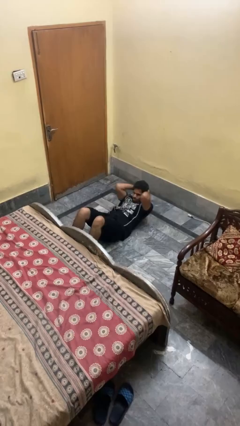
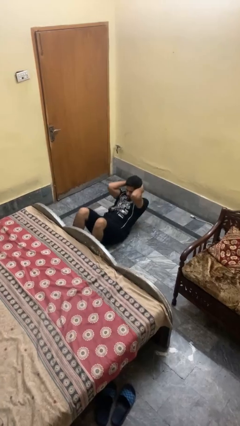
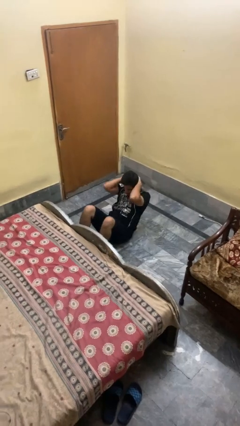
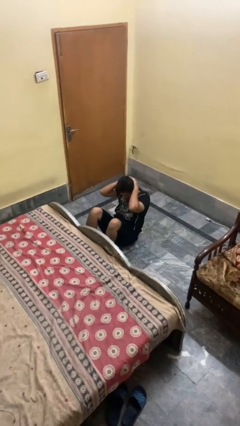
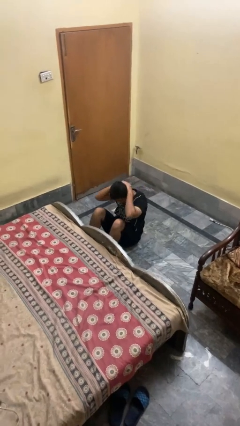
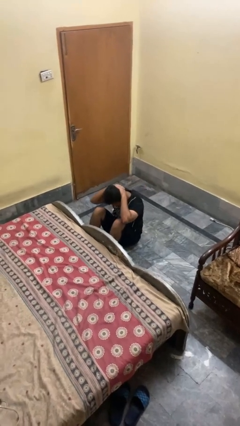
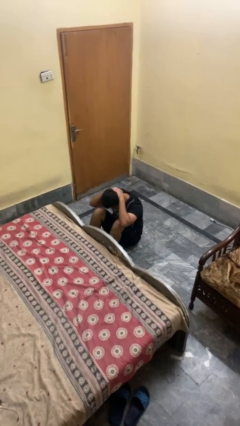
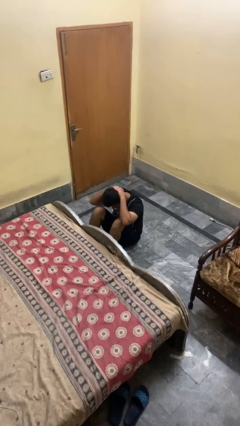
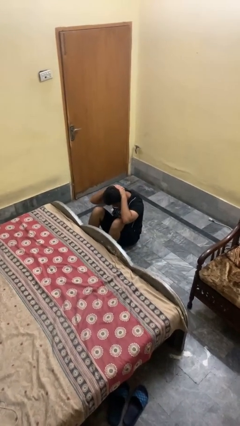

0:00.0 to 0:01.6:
person exercises with situp

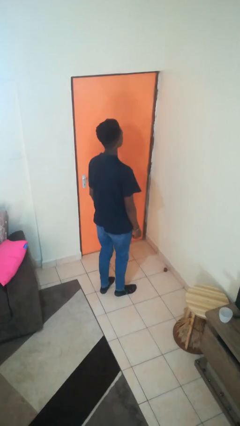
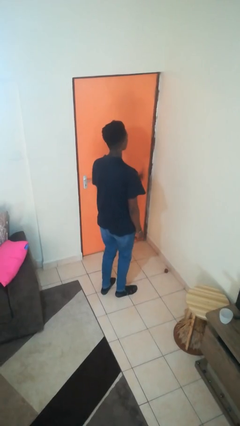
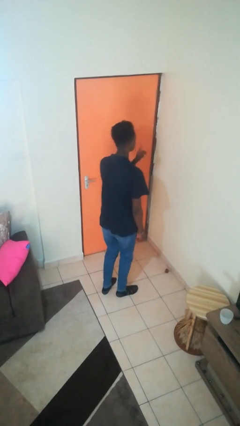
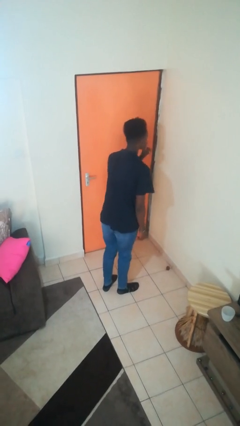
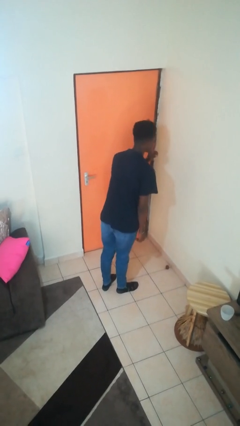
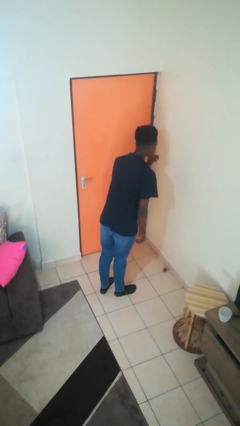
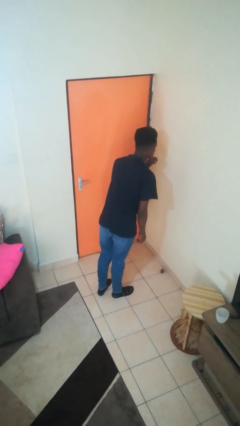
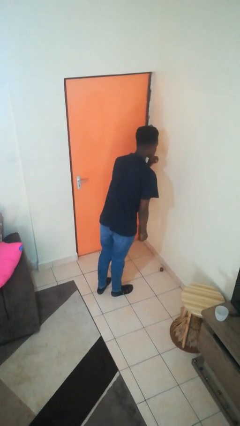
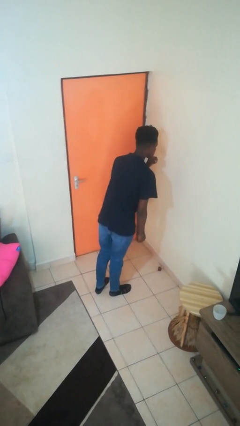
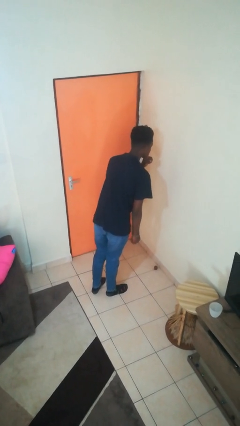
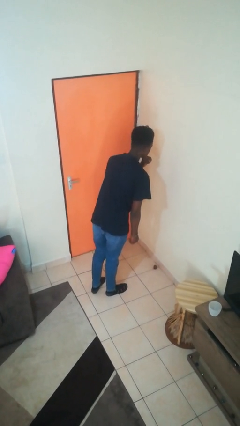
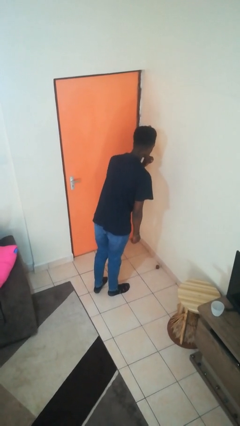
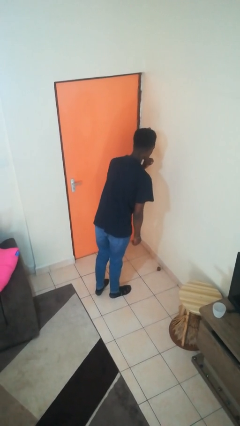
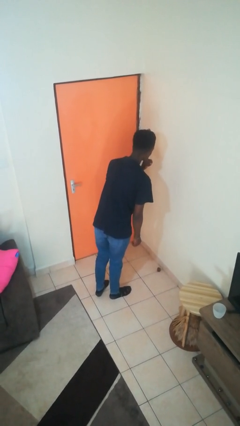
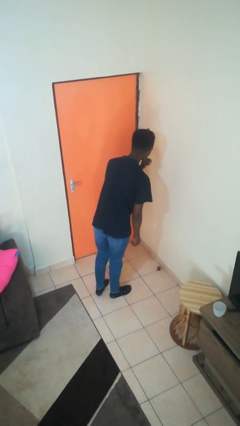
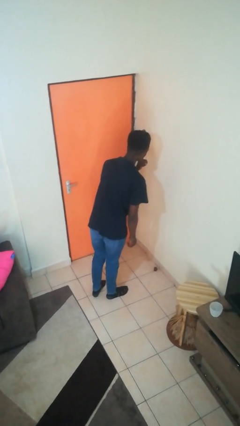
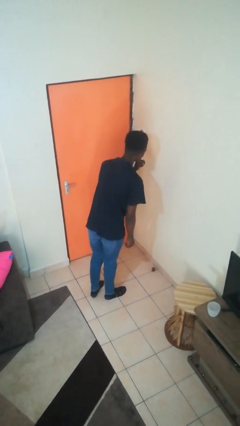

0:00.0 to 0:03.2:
person gestures be quiet

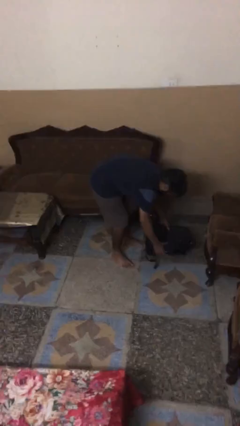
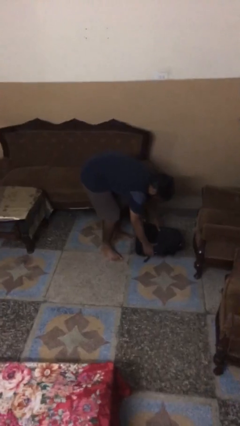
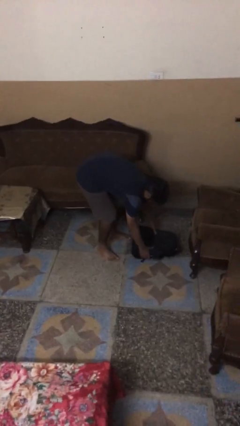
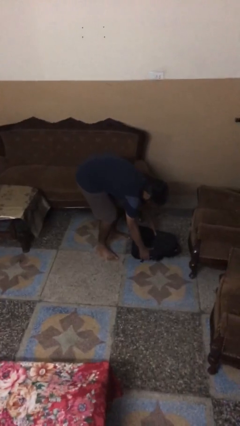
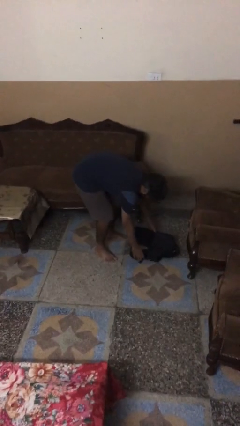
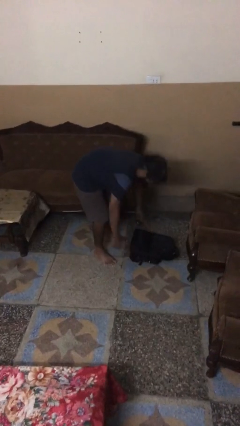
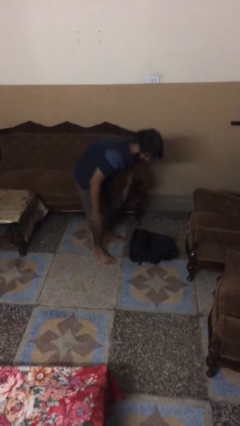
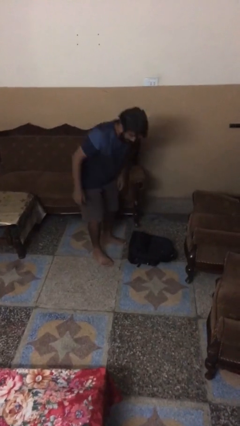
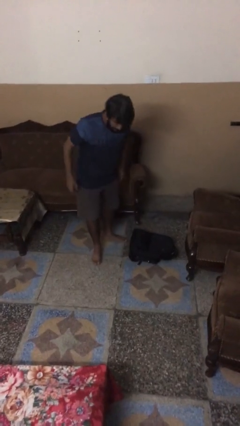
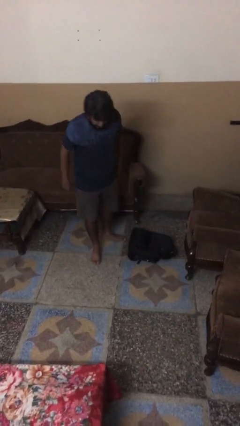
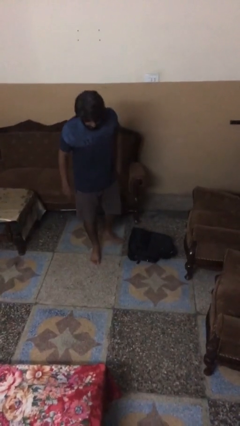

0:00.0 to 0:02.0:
person puts down object on floor

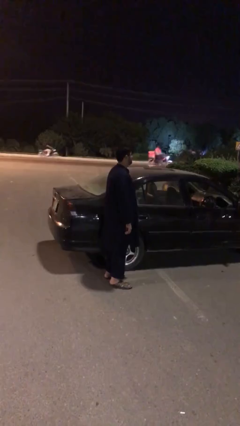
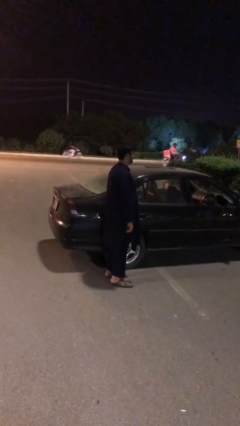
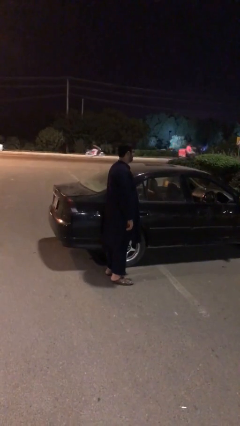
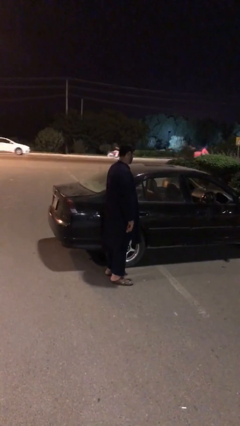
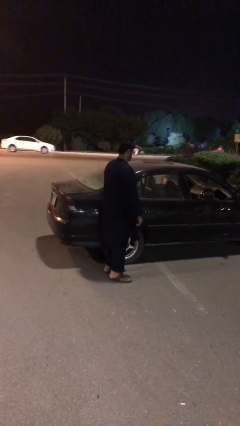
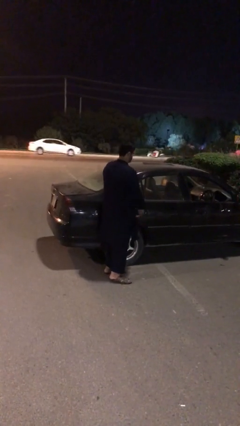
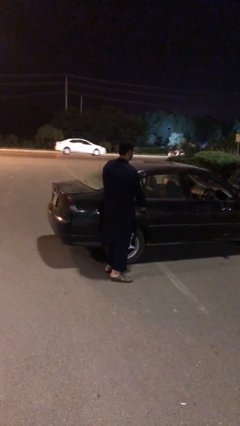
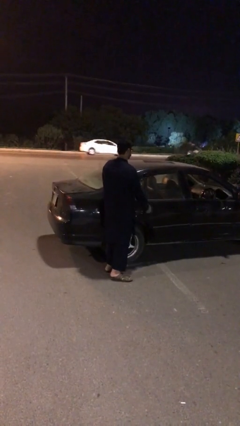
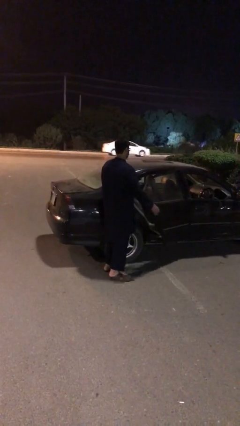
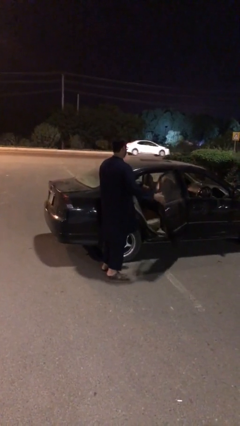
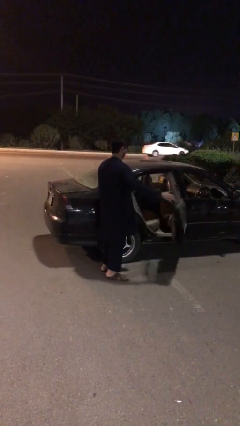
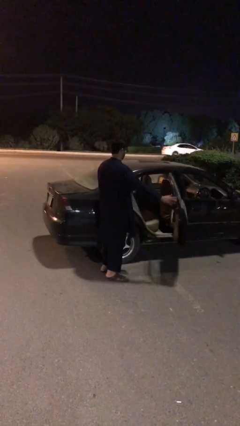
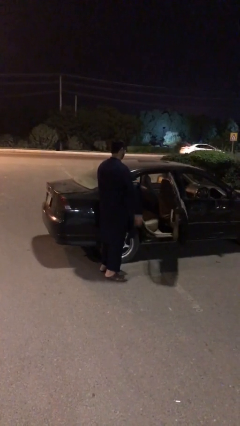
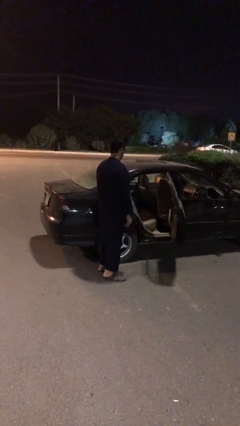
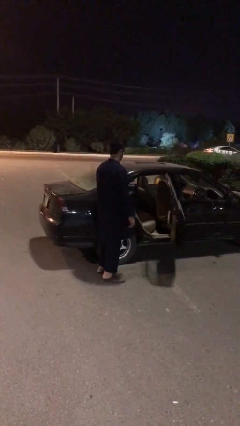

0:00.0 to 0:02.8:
person opens car door

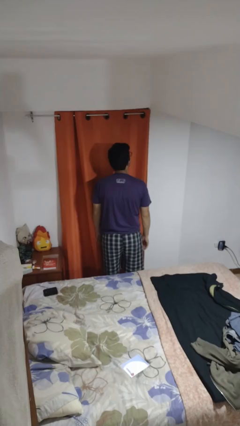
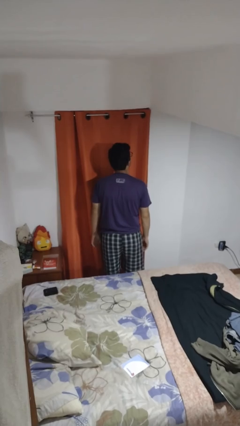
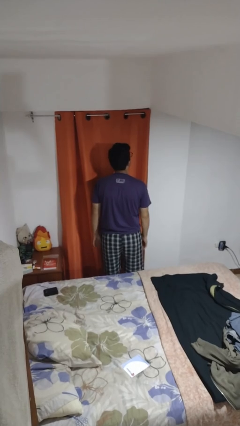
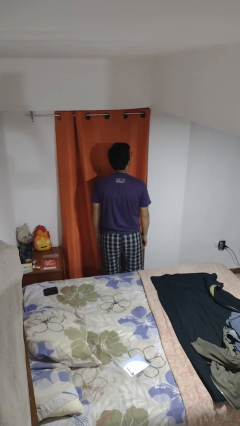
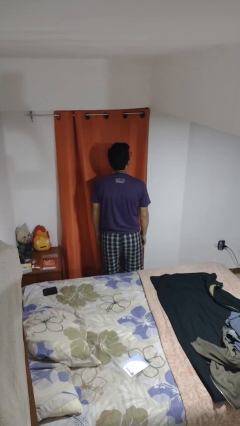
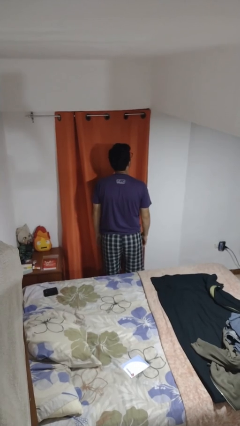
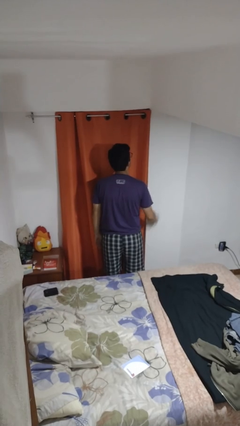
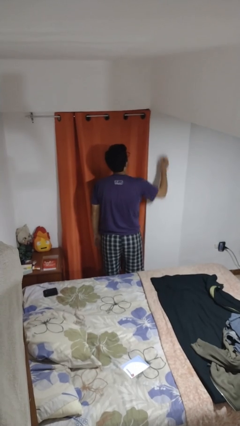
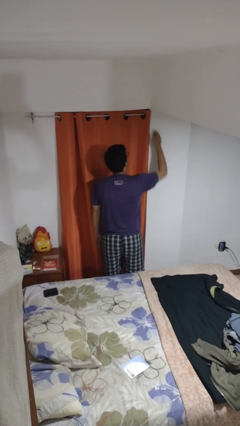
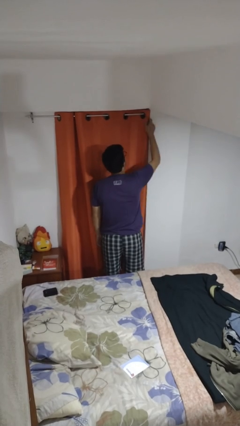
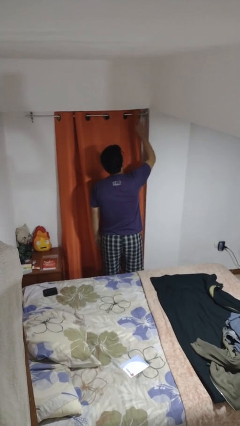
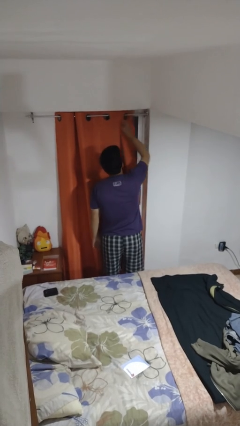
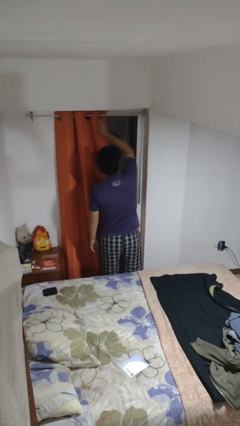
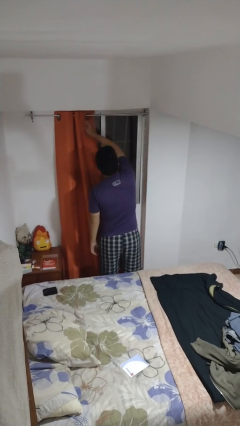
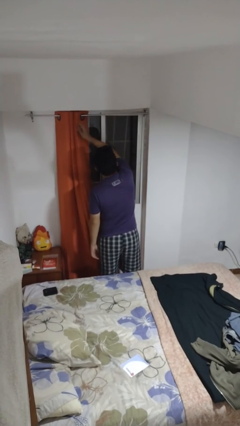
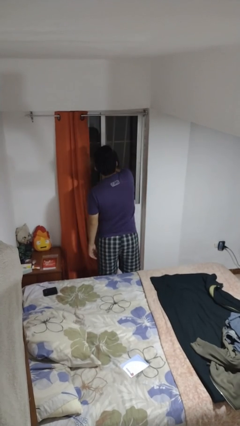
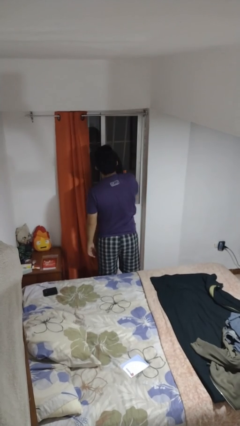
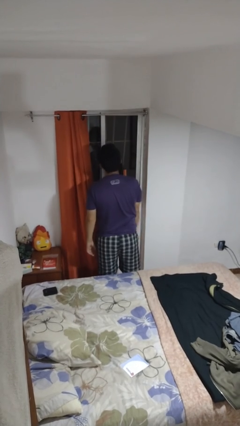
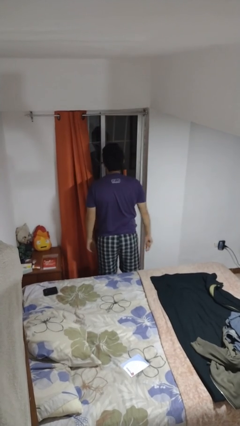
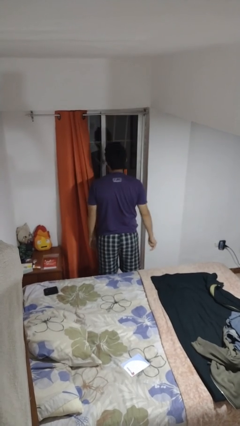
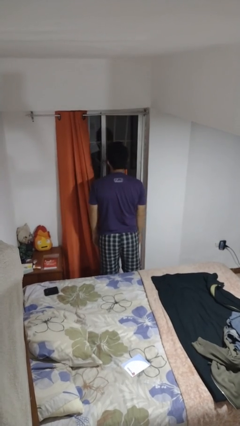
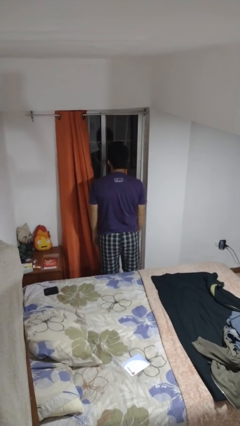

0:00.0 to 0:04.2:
person opens curtains

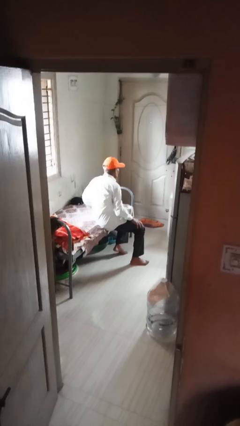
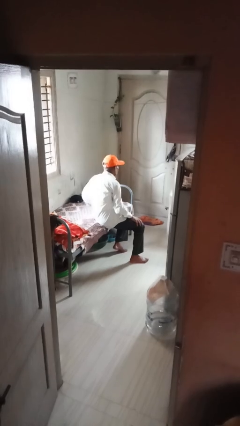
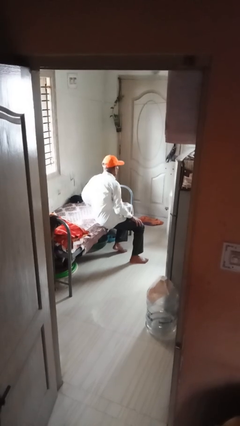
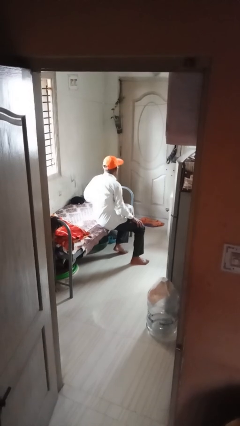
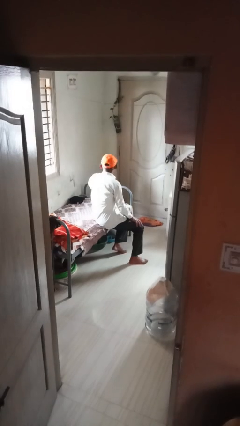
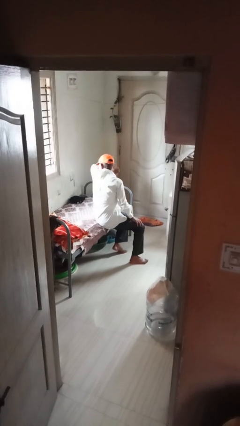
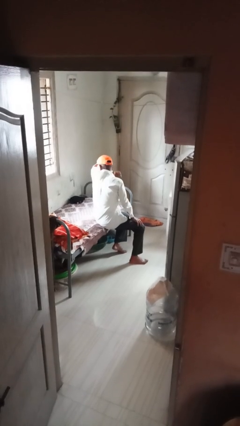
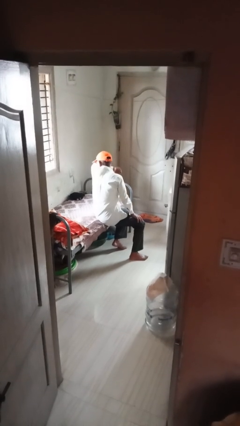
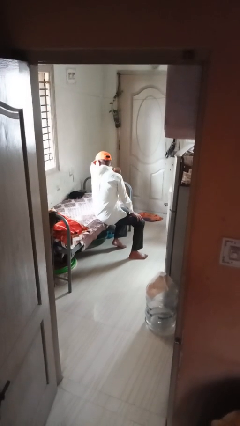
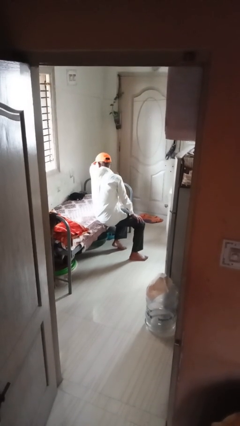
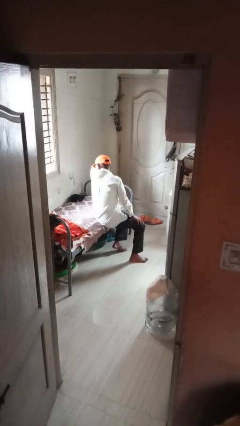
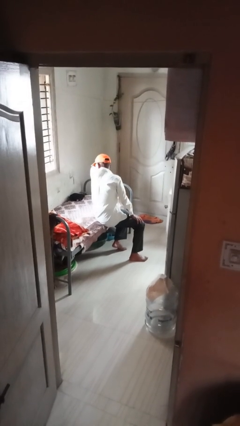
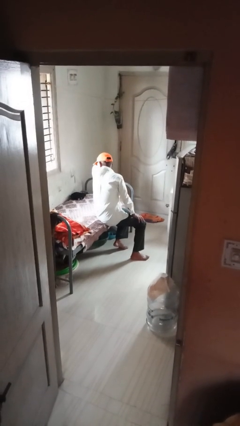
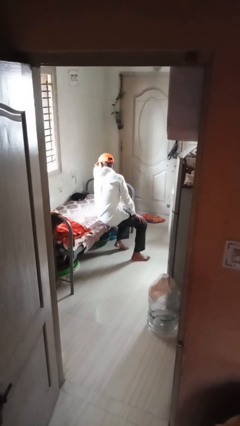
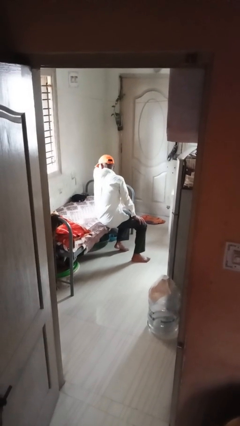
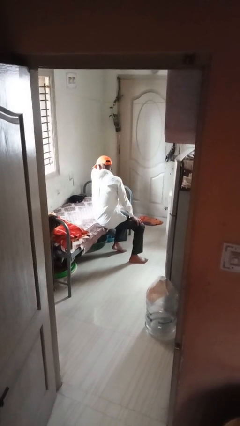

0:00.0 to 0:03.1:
person sneezes into arm

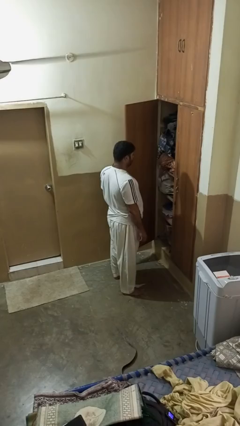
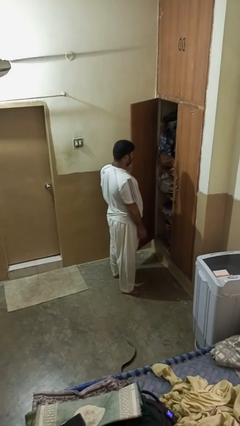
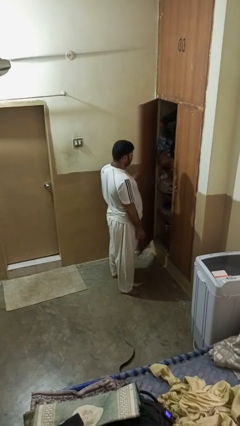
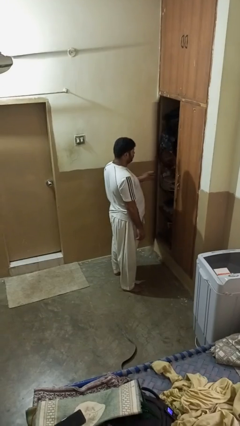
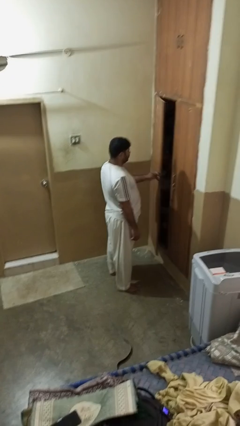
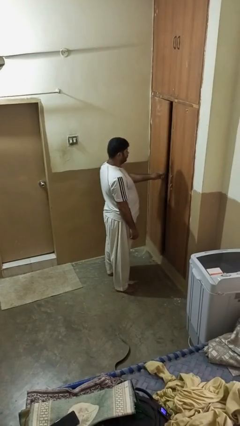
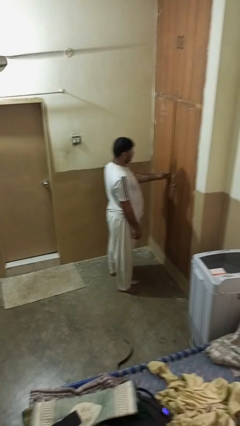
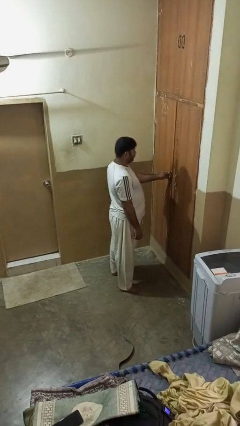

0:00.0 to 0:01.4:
person closes closet door
